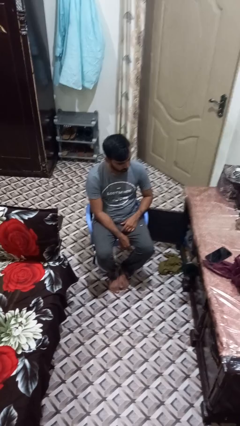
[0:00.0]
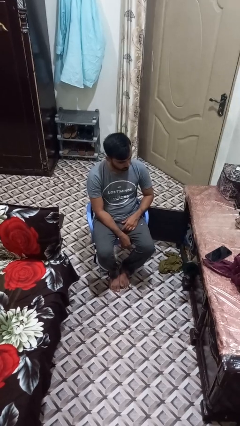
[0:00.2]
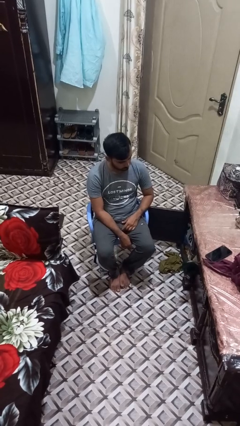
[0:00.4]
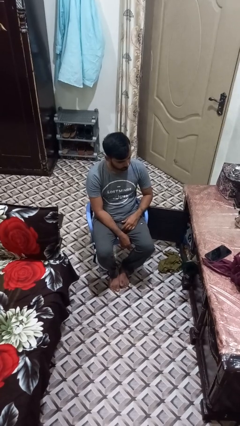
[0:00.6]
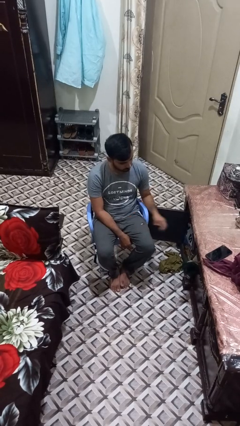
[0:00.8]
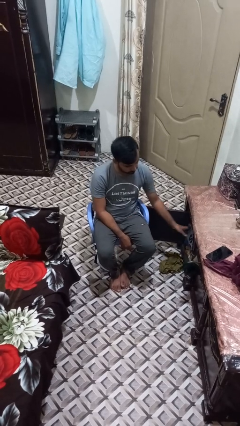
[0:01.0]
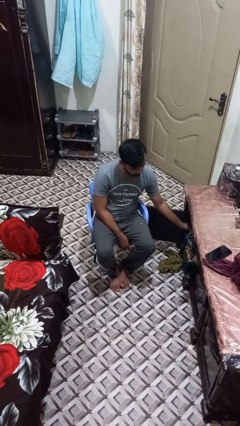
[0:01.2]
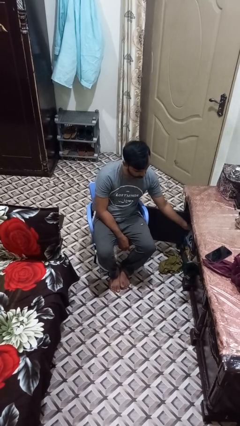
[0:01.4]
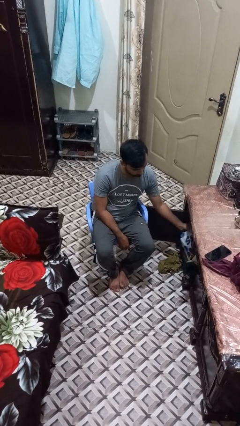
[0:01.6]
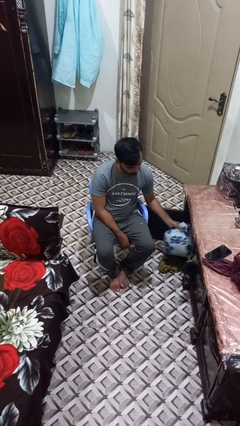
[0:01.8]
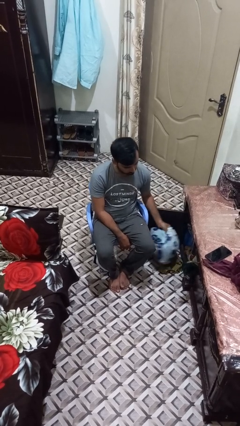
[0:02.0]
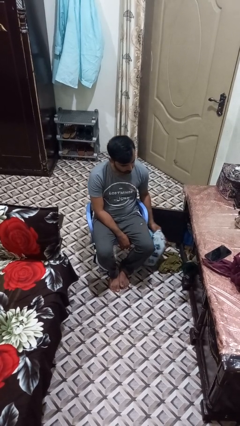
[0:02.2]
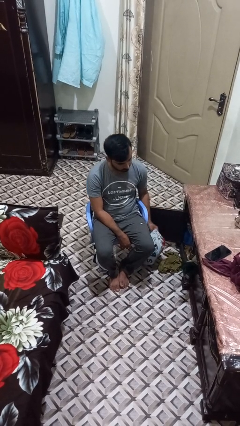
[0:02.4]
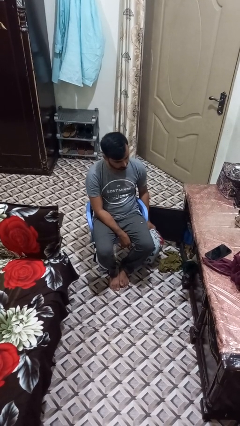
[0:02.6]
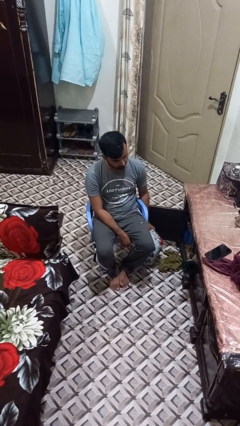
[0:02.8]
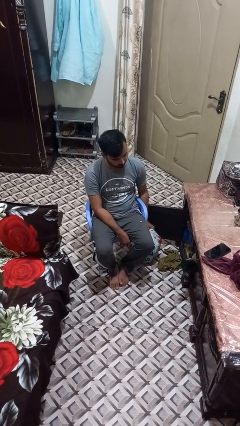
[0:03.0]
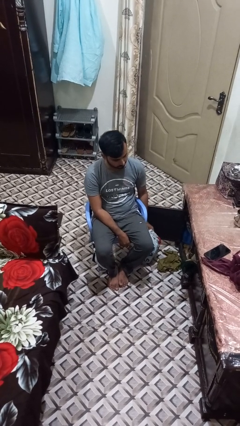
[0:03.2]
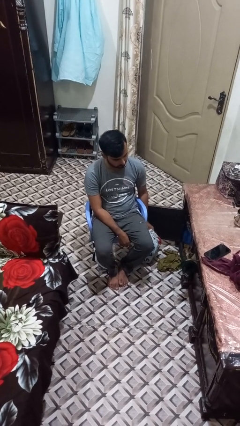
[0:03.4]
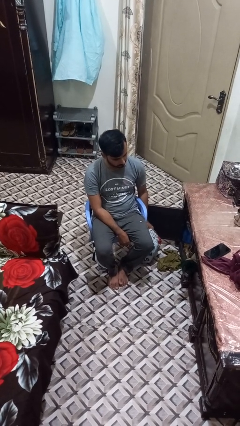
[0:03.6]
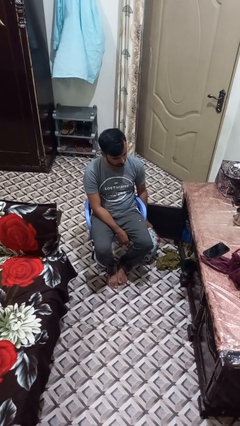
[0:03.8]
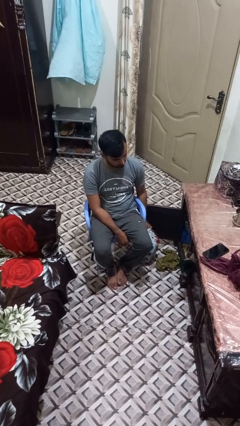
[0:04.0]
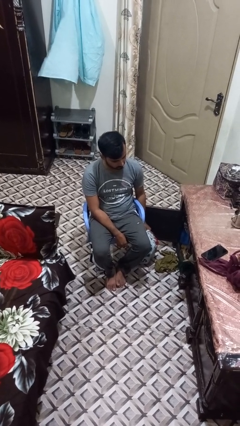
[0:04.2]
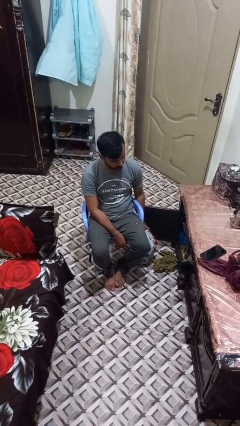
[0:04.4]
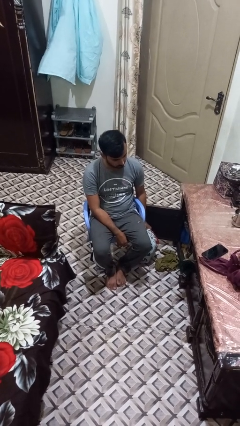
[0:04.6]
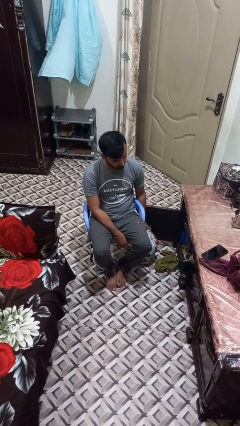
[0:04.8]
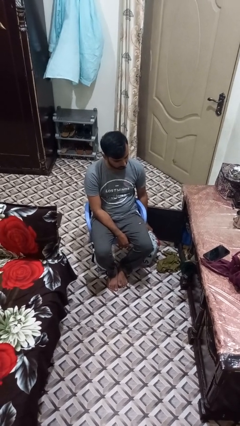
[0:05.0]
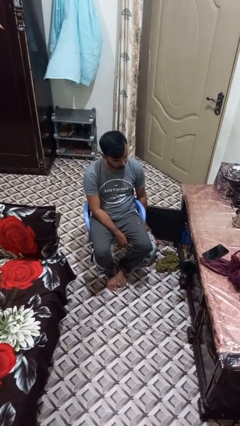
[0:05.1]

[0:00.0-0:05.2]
person picks up object from cabinet

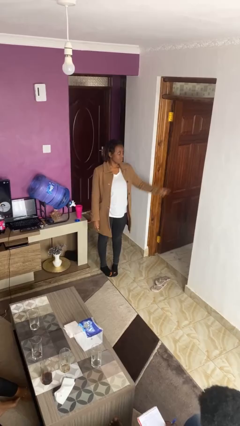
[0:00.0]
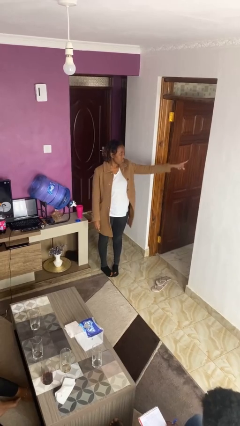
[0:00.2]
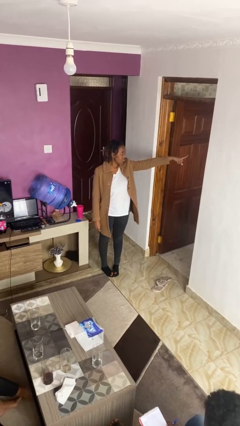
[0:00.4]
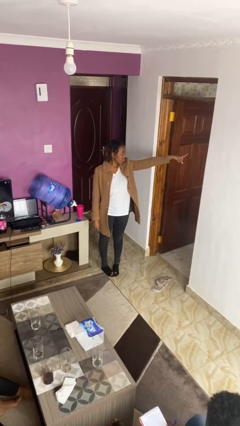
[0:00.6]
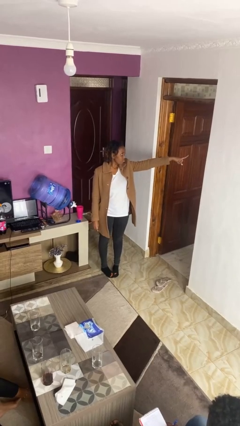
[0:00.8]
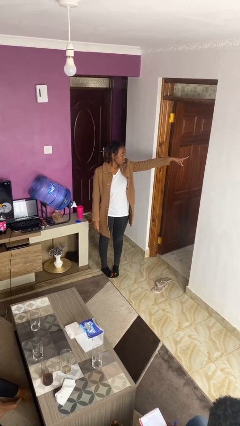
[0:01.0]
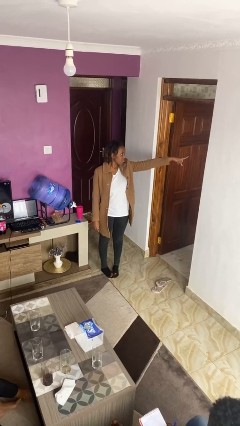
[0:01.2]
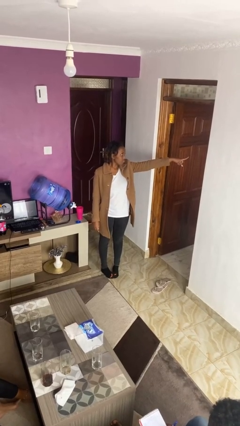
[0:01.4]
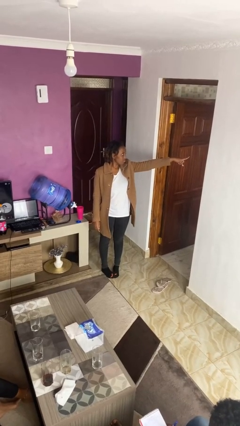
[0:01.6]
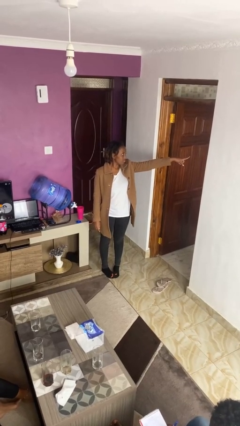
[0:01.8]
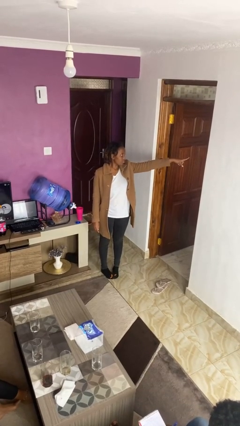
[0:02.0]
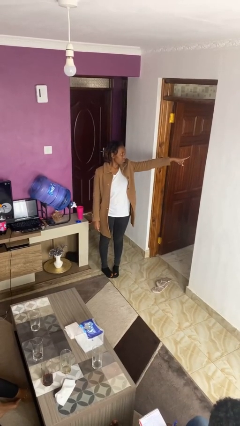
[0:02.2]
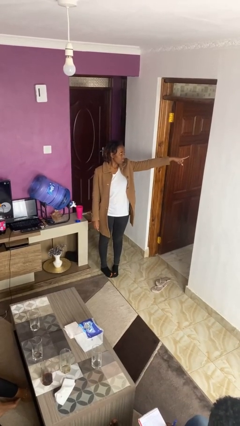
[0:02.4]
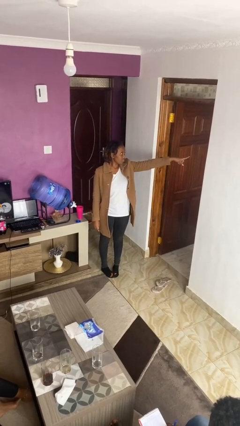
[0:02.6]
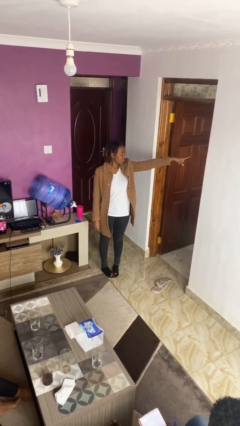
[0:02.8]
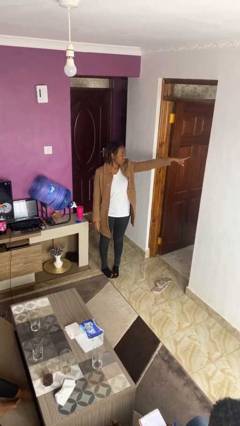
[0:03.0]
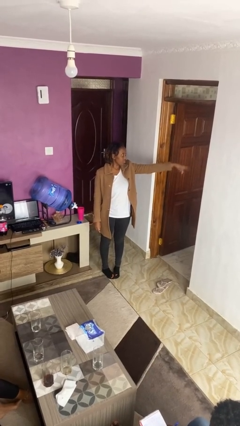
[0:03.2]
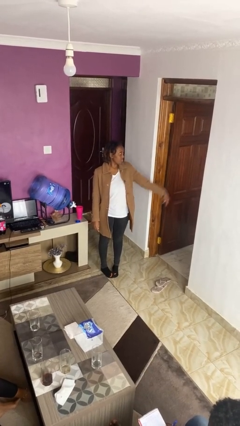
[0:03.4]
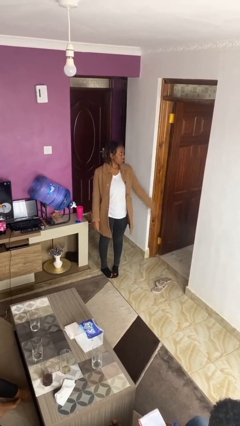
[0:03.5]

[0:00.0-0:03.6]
person points at person

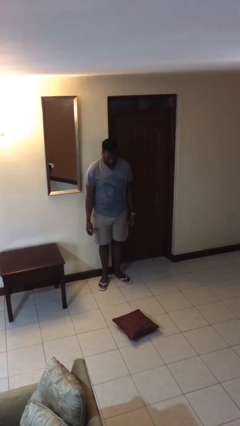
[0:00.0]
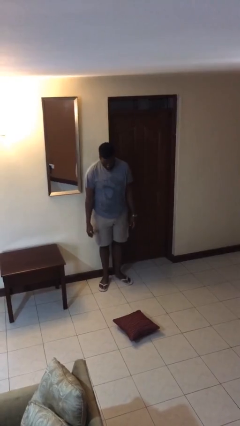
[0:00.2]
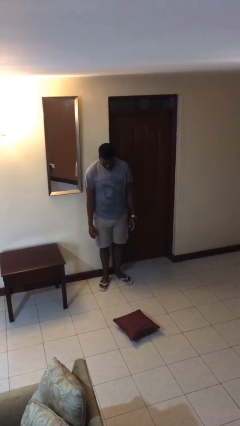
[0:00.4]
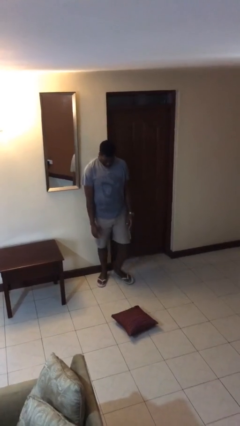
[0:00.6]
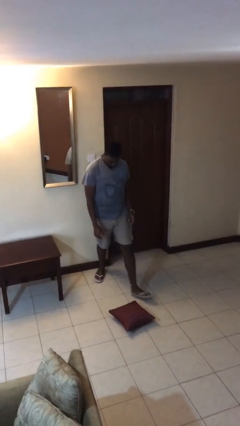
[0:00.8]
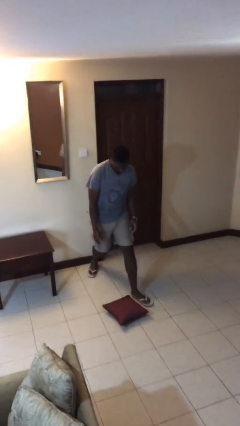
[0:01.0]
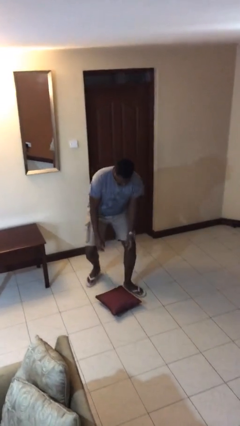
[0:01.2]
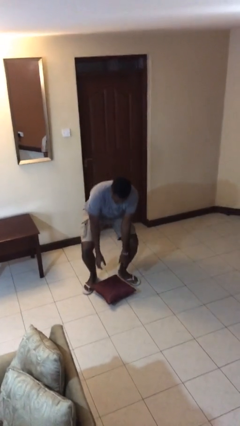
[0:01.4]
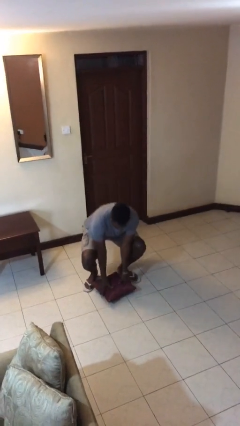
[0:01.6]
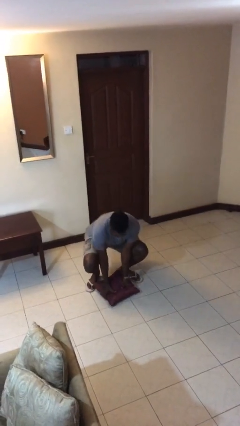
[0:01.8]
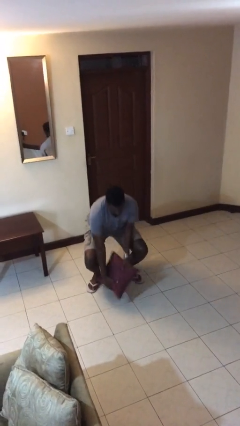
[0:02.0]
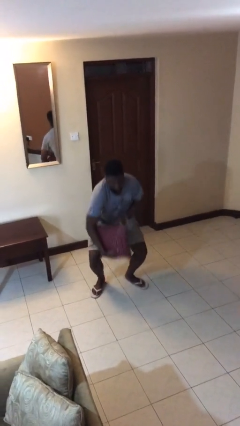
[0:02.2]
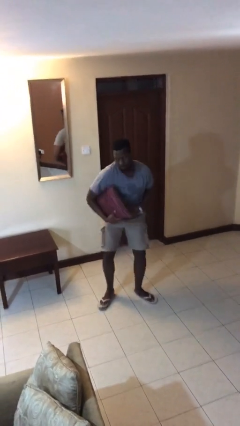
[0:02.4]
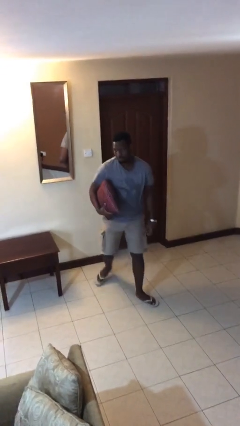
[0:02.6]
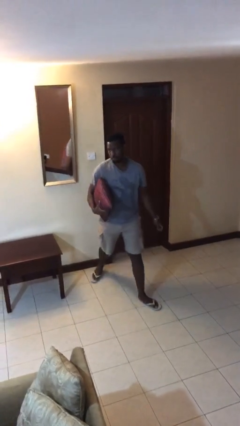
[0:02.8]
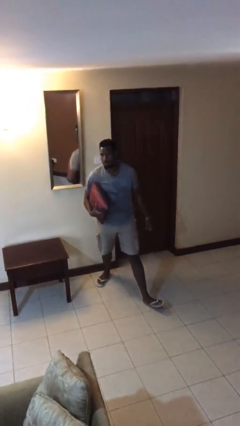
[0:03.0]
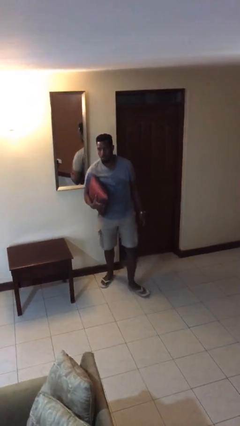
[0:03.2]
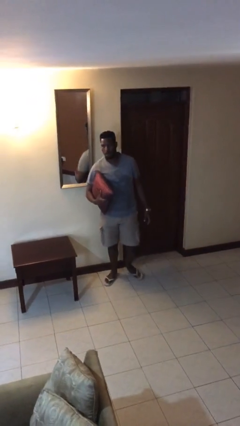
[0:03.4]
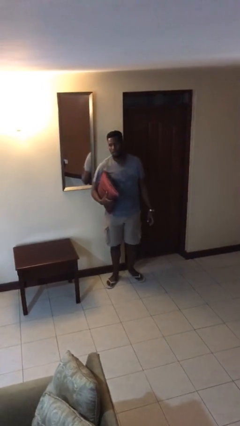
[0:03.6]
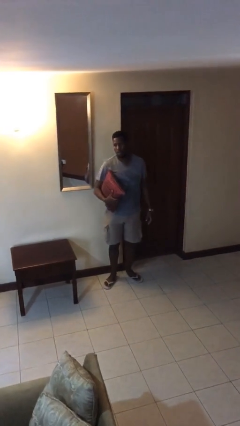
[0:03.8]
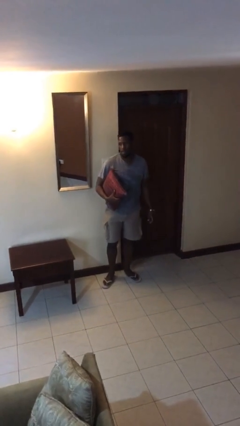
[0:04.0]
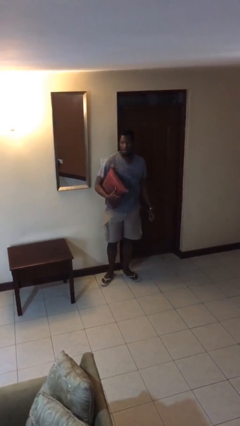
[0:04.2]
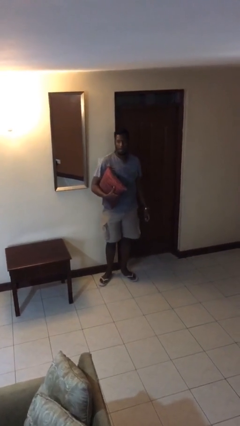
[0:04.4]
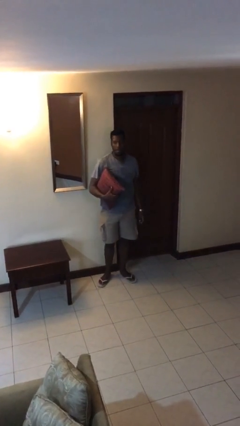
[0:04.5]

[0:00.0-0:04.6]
person picks up object from floor

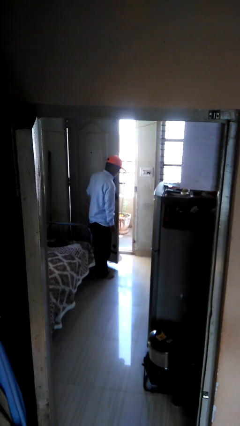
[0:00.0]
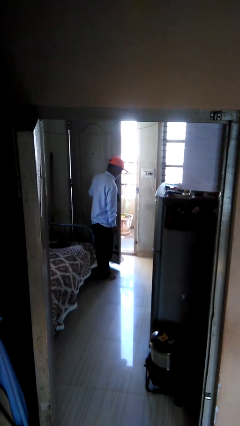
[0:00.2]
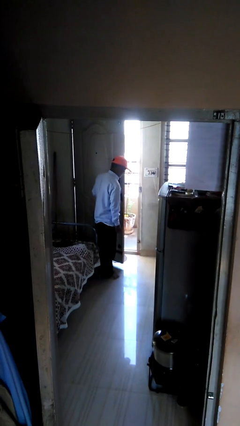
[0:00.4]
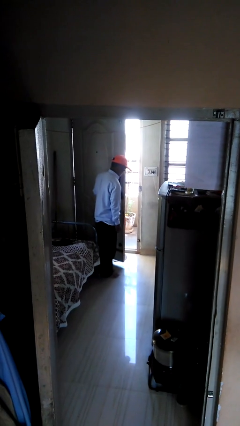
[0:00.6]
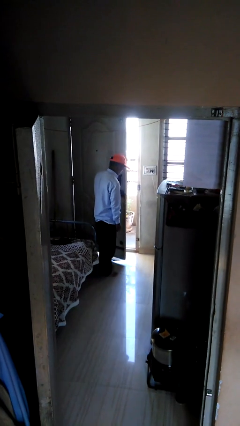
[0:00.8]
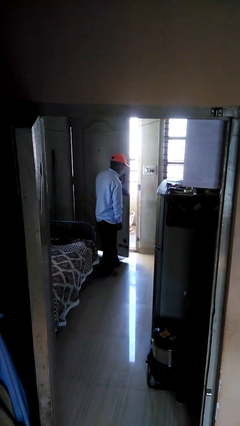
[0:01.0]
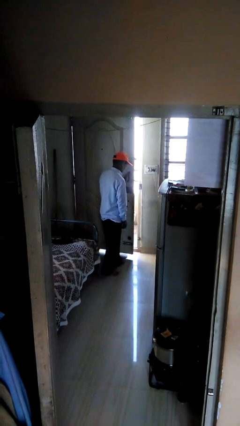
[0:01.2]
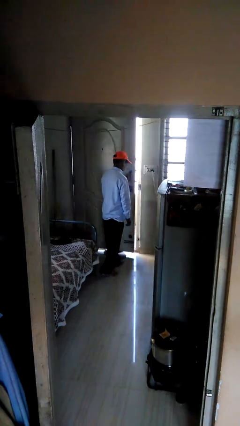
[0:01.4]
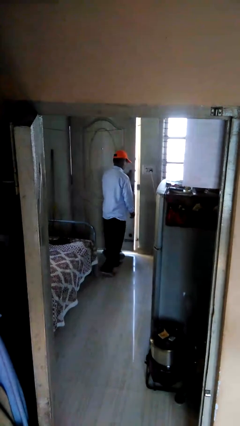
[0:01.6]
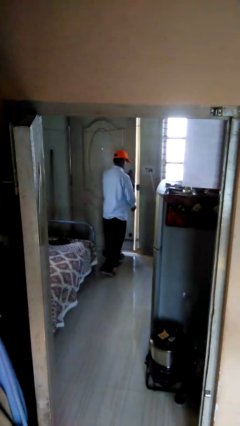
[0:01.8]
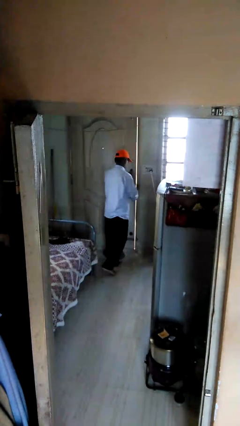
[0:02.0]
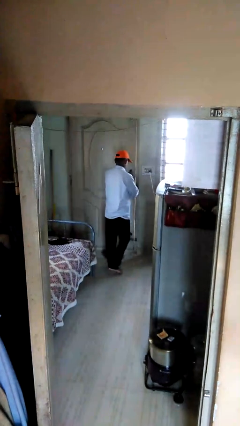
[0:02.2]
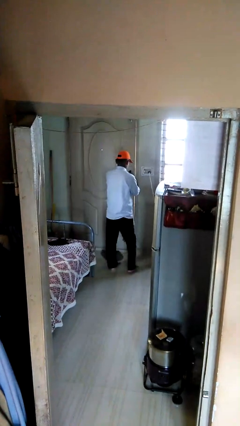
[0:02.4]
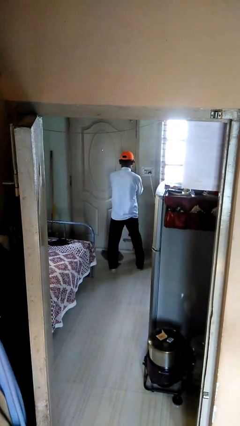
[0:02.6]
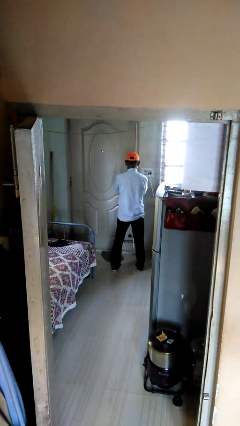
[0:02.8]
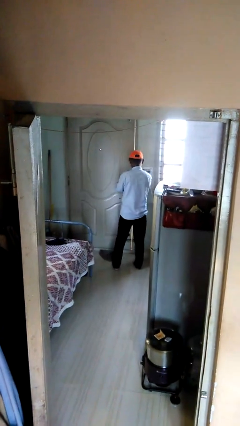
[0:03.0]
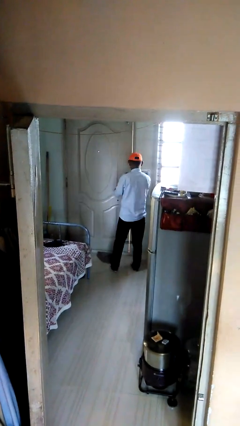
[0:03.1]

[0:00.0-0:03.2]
person closes facility door

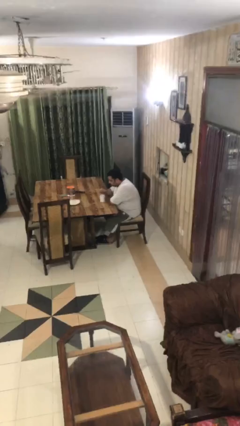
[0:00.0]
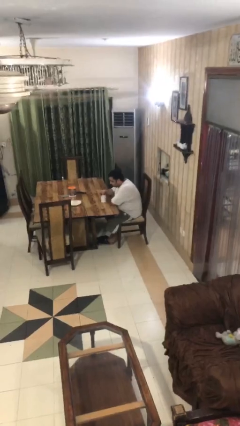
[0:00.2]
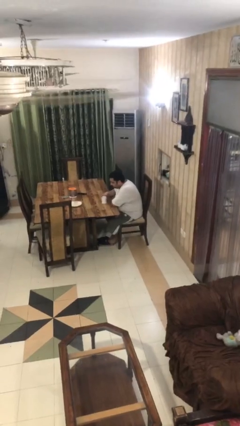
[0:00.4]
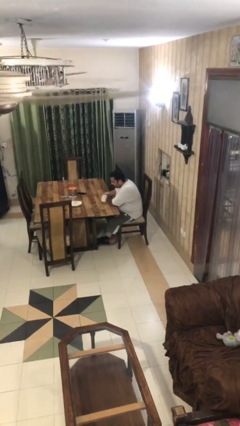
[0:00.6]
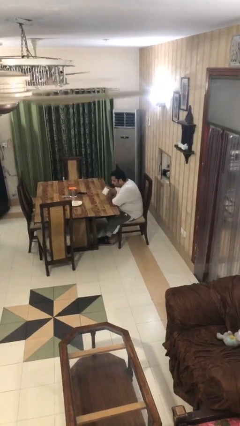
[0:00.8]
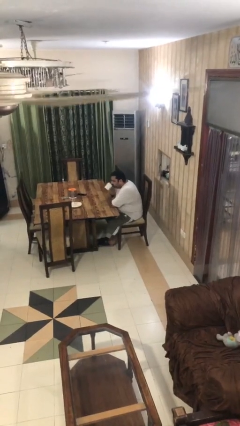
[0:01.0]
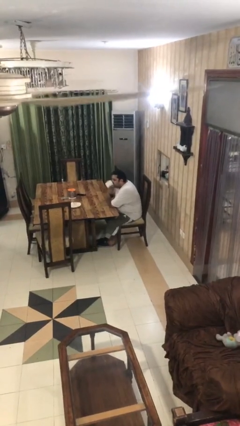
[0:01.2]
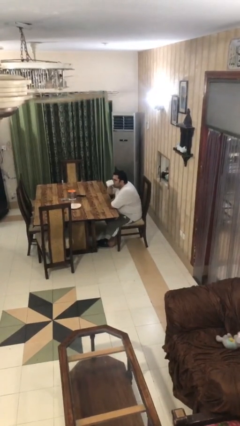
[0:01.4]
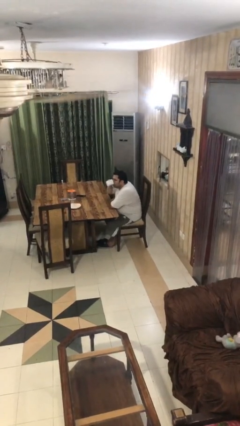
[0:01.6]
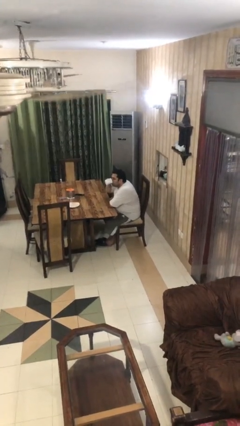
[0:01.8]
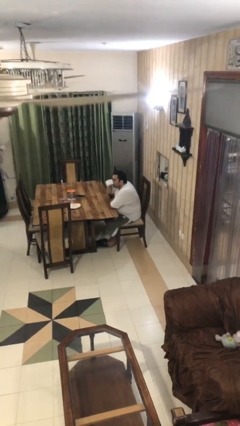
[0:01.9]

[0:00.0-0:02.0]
person drinks from mug
